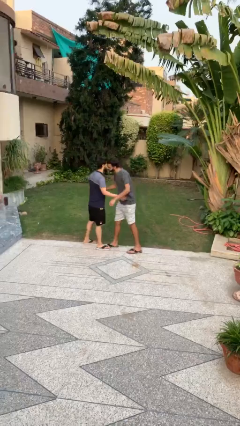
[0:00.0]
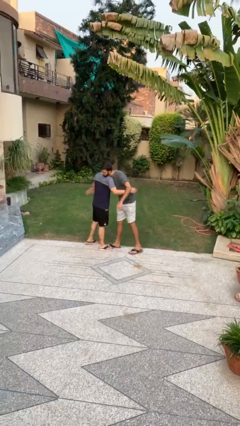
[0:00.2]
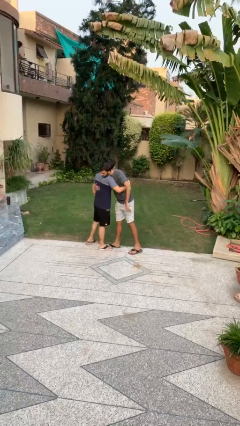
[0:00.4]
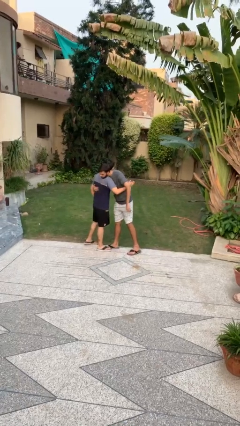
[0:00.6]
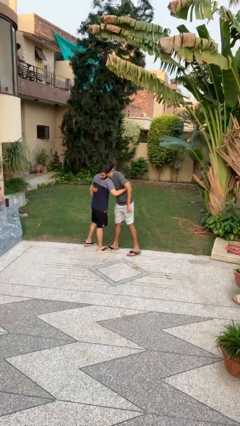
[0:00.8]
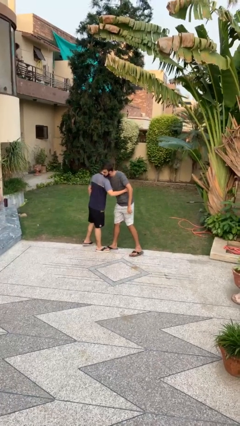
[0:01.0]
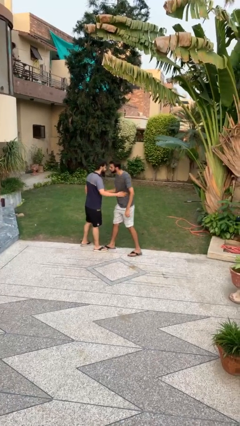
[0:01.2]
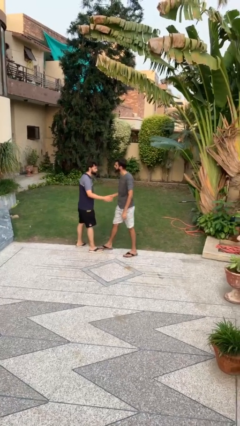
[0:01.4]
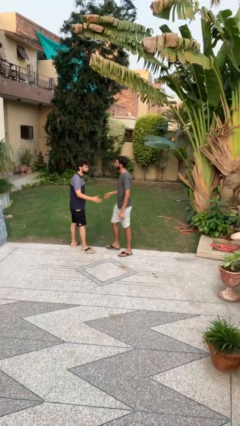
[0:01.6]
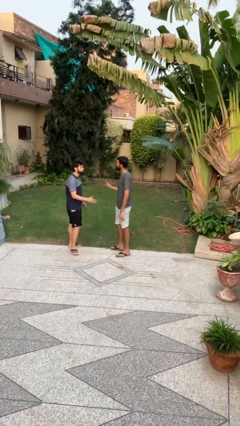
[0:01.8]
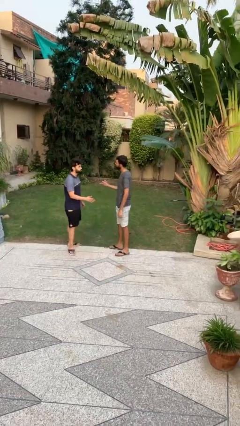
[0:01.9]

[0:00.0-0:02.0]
person embraces person

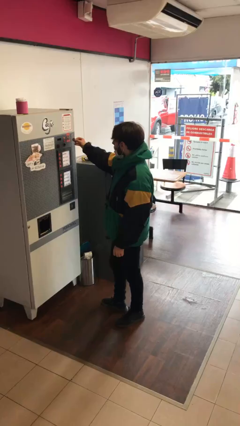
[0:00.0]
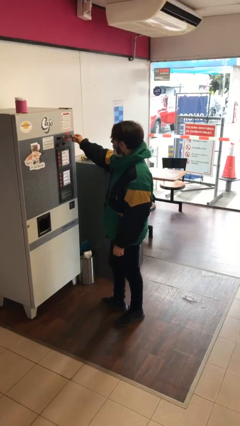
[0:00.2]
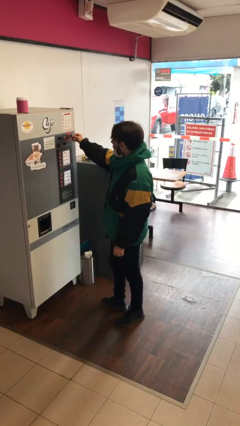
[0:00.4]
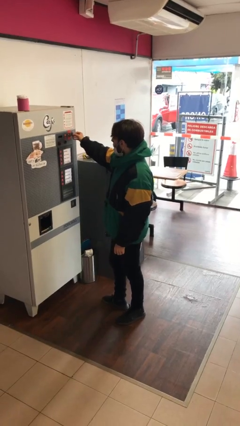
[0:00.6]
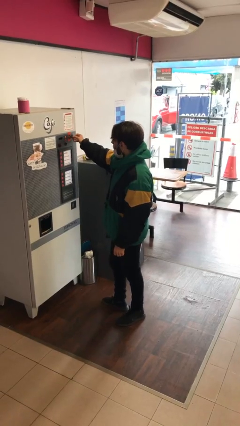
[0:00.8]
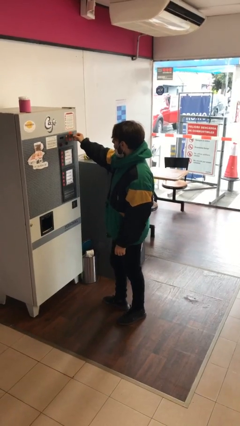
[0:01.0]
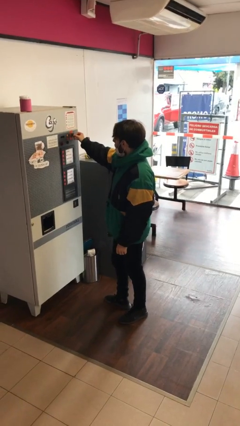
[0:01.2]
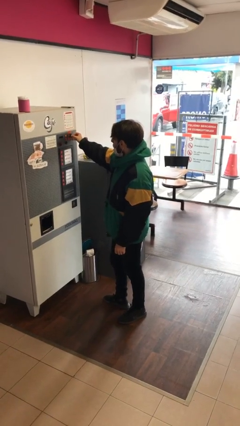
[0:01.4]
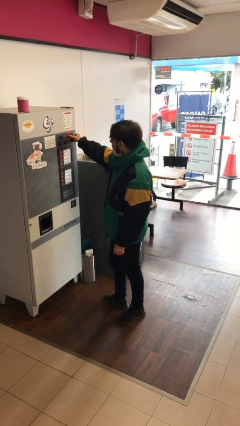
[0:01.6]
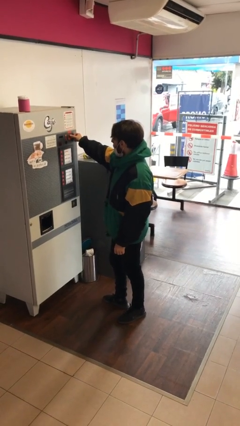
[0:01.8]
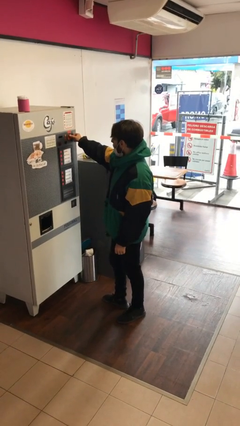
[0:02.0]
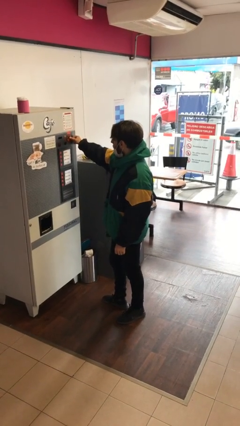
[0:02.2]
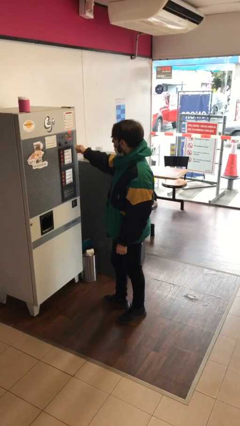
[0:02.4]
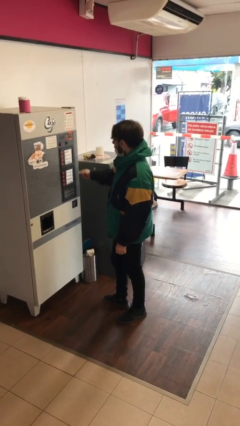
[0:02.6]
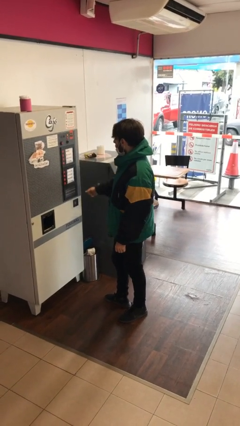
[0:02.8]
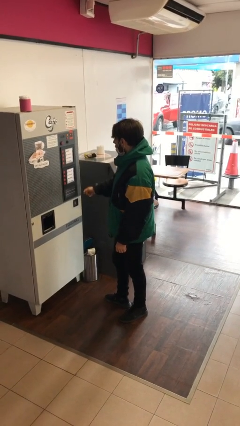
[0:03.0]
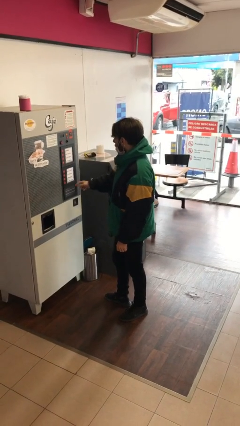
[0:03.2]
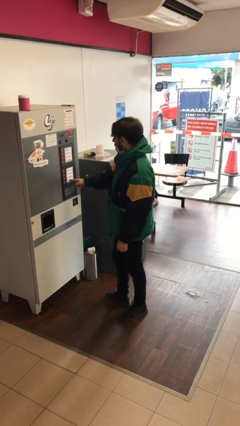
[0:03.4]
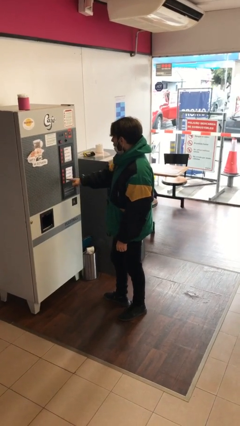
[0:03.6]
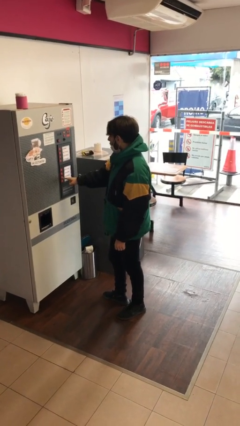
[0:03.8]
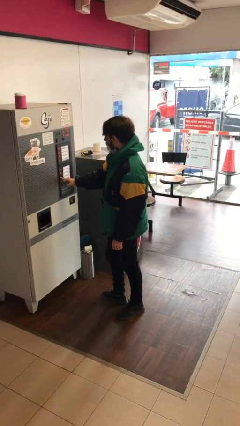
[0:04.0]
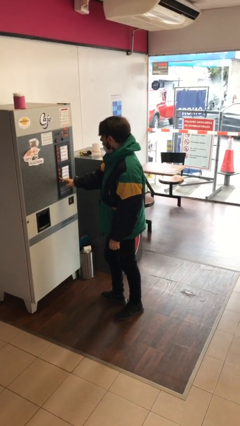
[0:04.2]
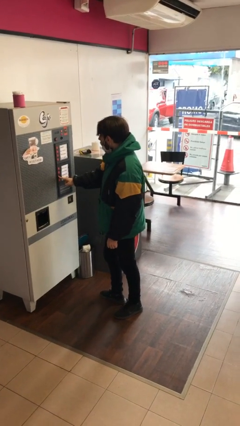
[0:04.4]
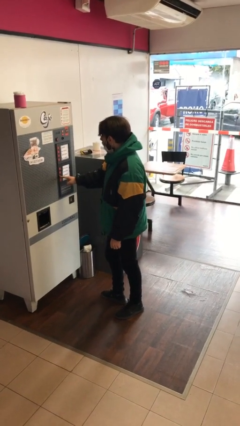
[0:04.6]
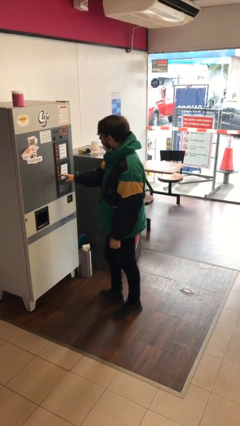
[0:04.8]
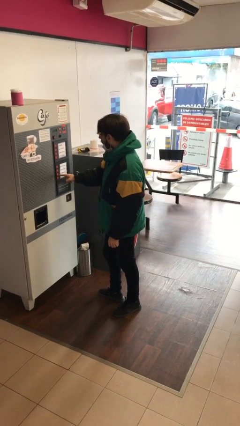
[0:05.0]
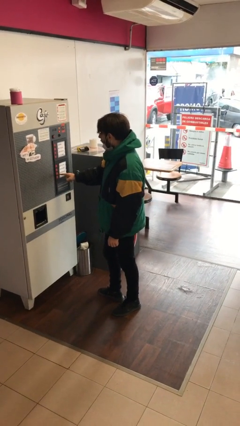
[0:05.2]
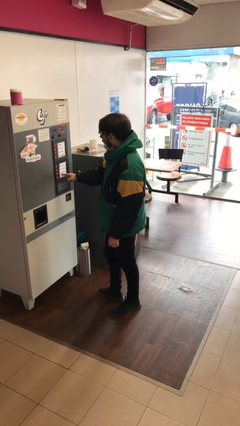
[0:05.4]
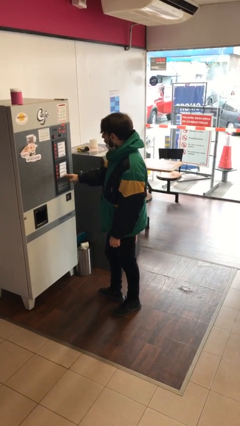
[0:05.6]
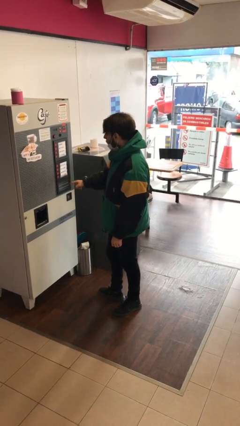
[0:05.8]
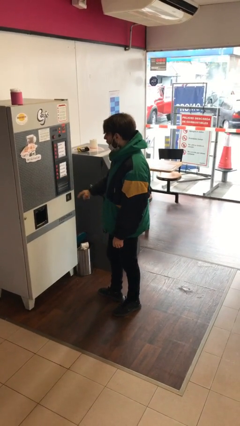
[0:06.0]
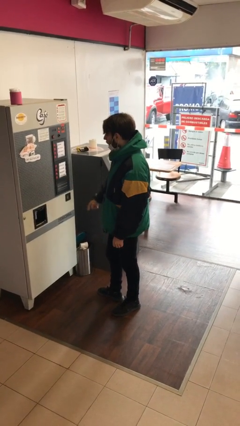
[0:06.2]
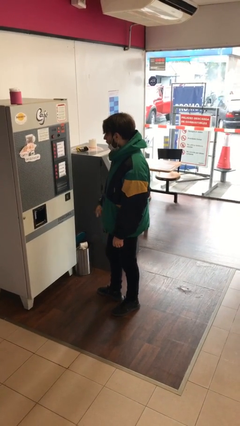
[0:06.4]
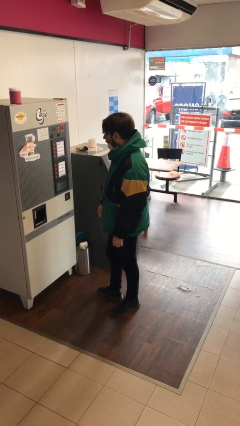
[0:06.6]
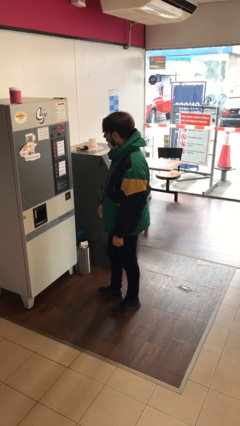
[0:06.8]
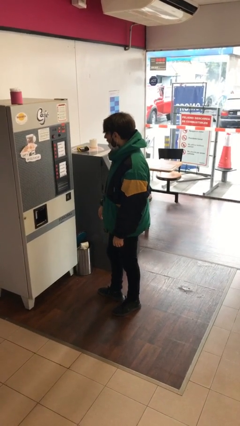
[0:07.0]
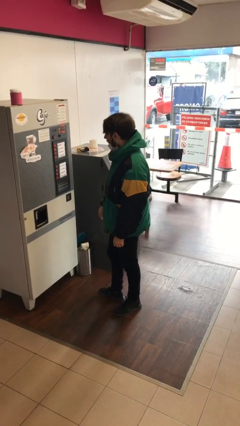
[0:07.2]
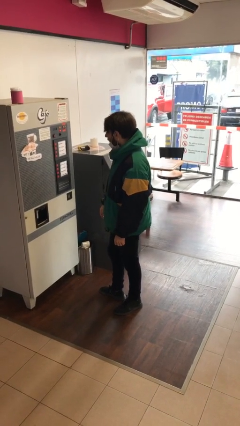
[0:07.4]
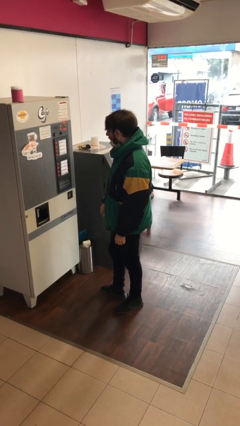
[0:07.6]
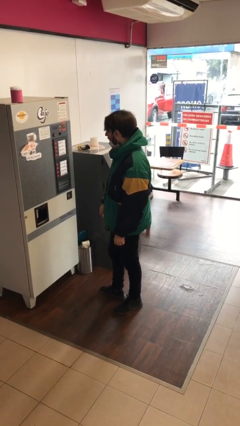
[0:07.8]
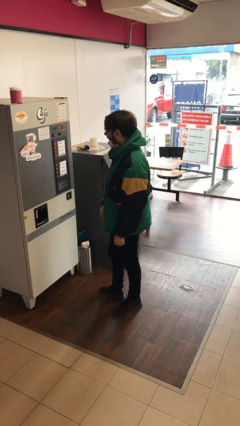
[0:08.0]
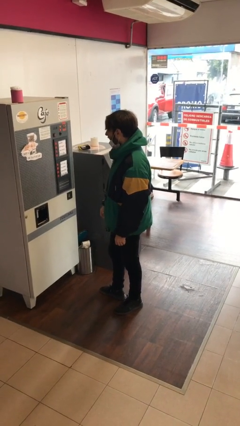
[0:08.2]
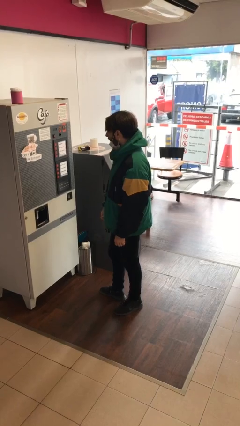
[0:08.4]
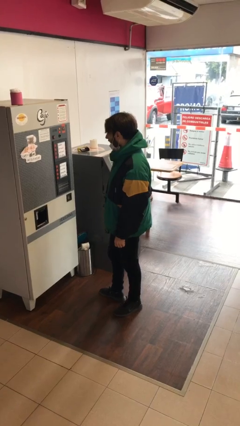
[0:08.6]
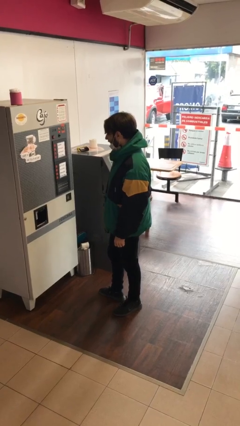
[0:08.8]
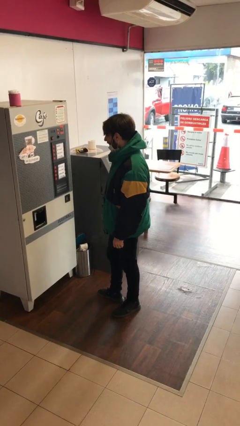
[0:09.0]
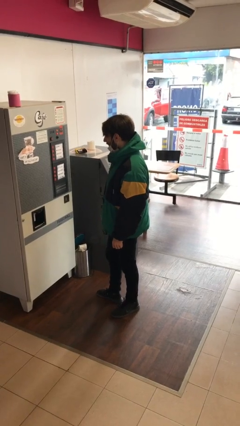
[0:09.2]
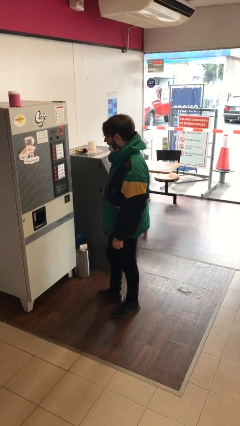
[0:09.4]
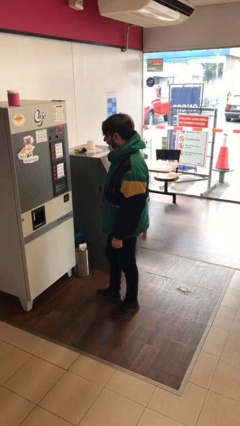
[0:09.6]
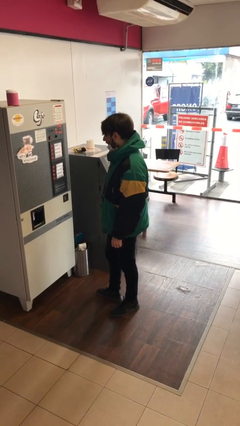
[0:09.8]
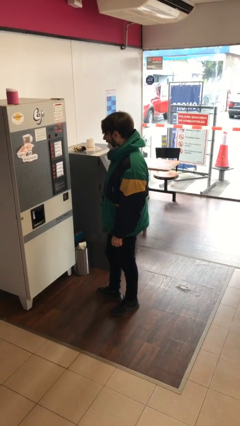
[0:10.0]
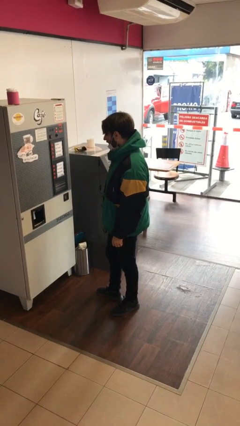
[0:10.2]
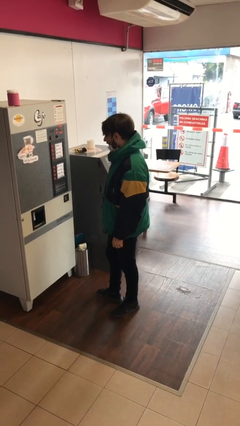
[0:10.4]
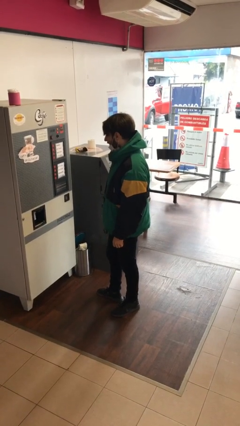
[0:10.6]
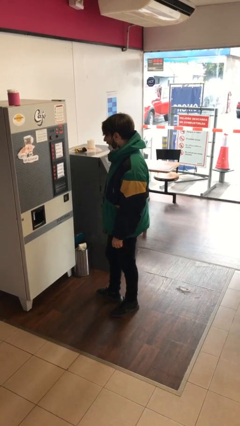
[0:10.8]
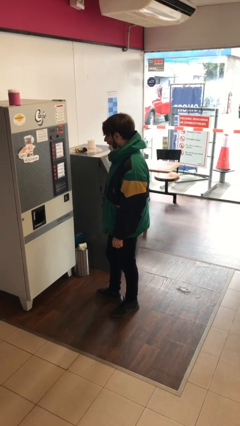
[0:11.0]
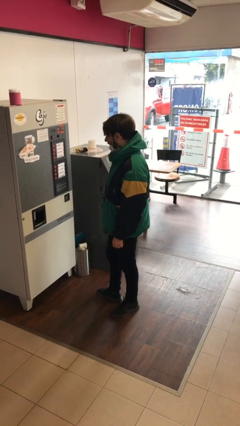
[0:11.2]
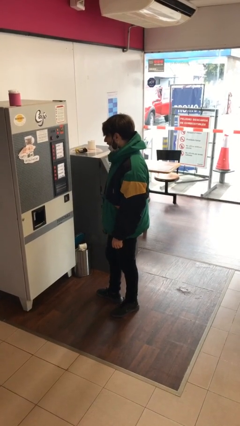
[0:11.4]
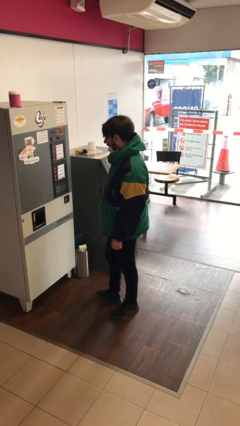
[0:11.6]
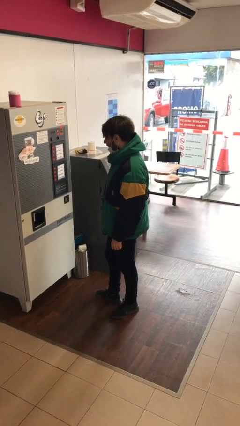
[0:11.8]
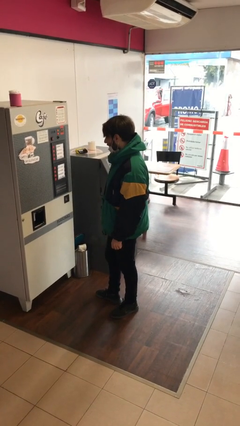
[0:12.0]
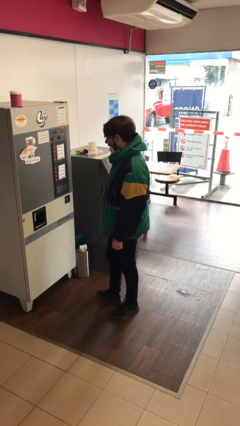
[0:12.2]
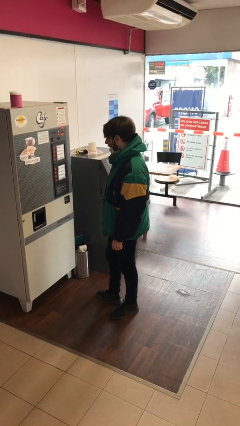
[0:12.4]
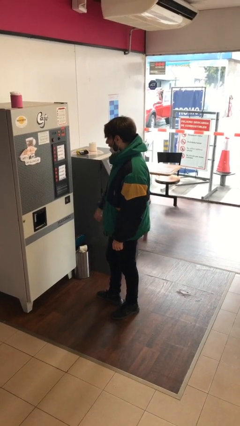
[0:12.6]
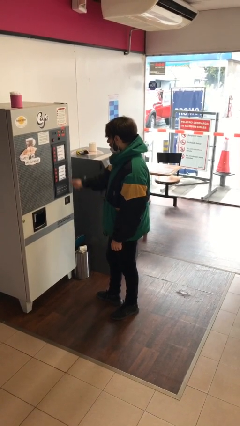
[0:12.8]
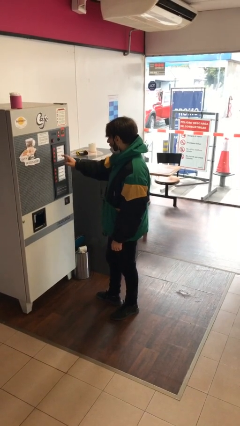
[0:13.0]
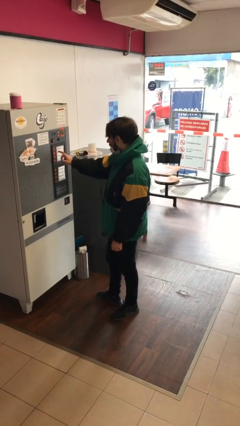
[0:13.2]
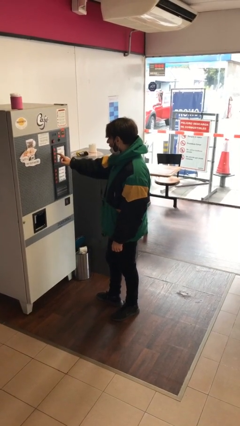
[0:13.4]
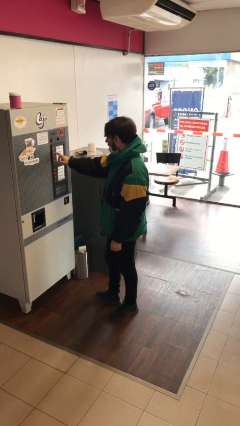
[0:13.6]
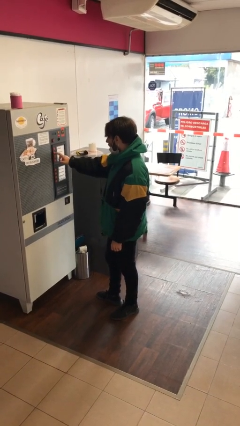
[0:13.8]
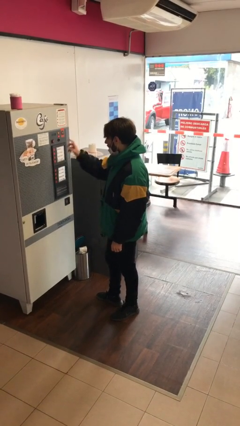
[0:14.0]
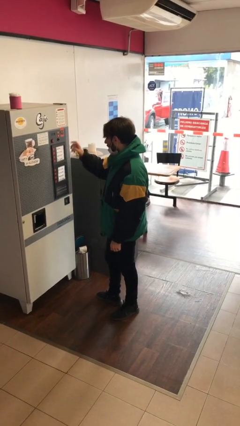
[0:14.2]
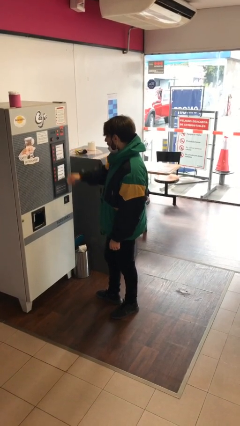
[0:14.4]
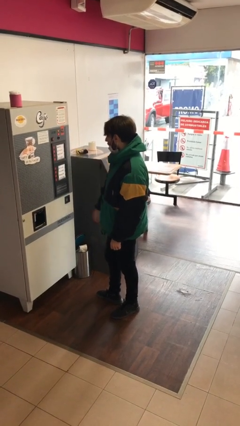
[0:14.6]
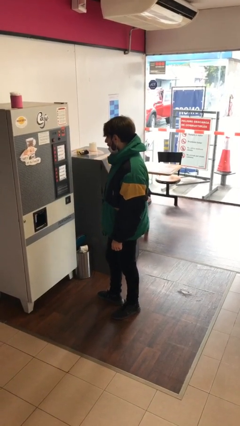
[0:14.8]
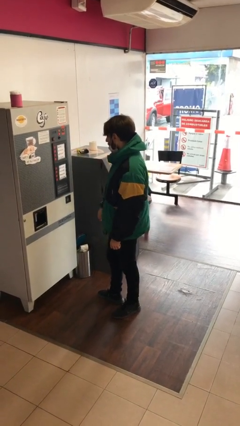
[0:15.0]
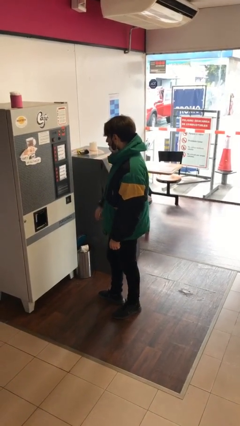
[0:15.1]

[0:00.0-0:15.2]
person purchases from machine

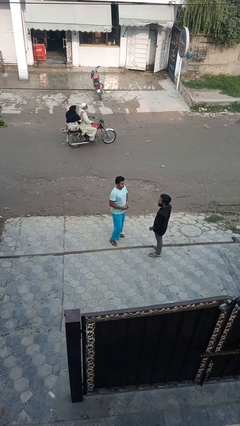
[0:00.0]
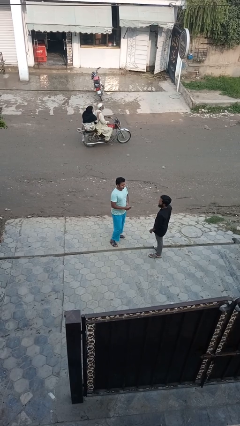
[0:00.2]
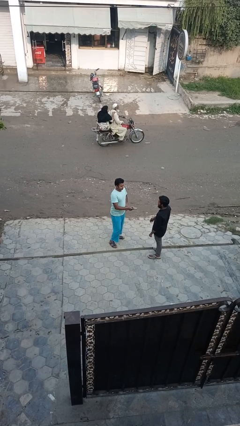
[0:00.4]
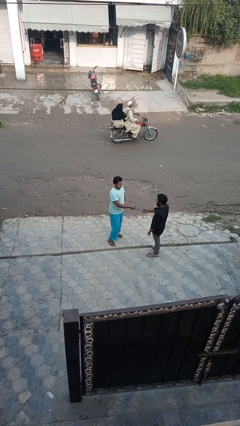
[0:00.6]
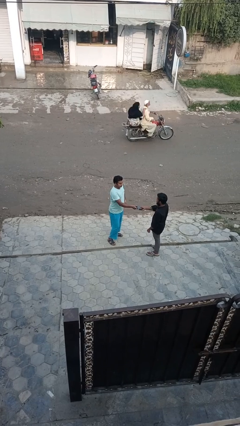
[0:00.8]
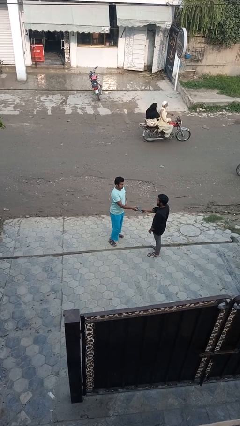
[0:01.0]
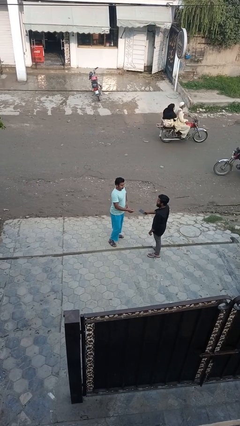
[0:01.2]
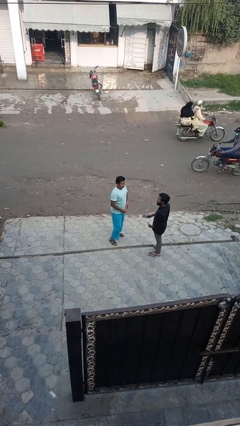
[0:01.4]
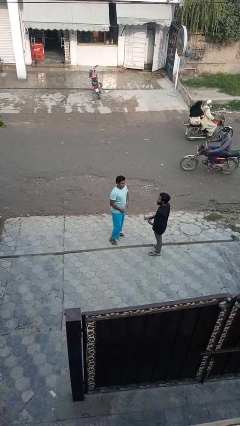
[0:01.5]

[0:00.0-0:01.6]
person transfers object to person
